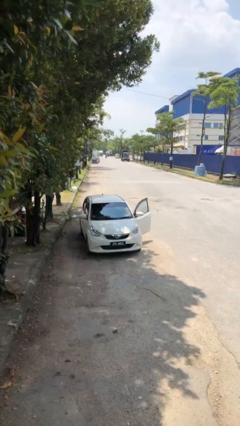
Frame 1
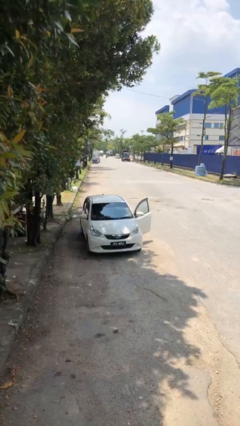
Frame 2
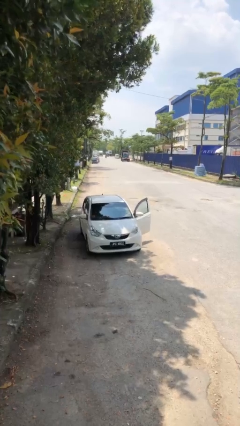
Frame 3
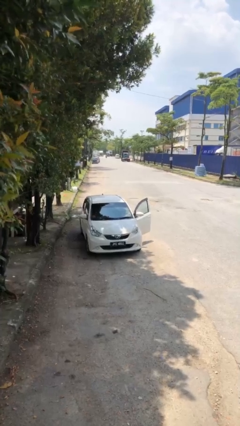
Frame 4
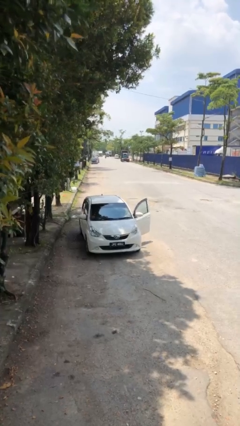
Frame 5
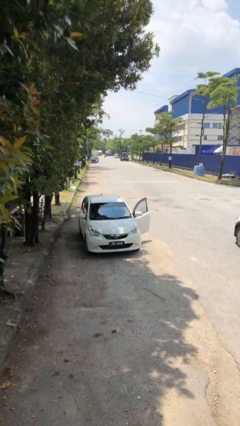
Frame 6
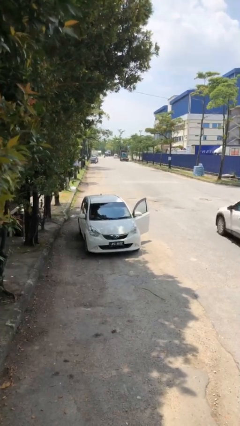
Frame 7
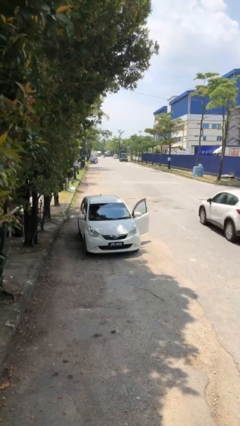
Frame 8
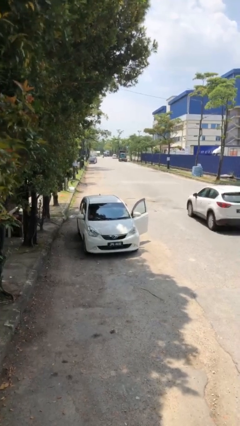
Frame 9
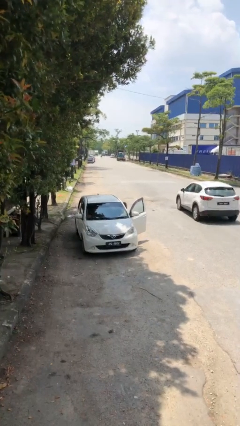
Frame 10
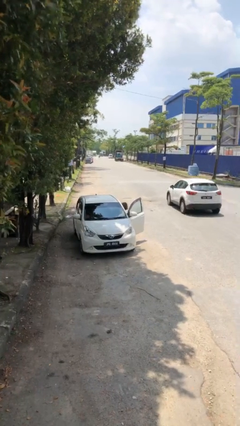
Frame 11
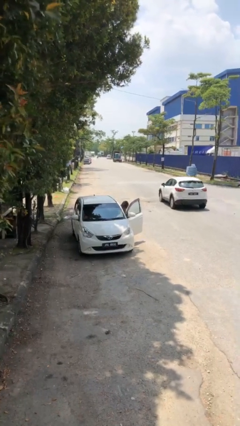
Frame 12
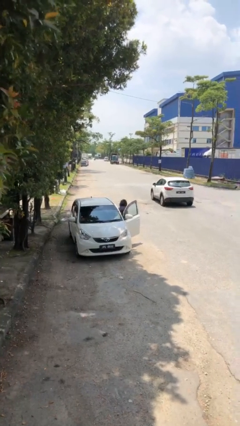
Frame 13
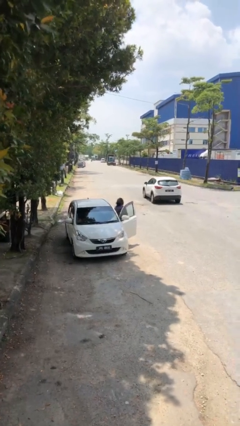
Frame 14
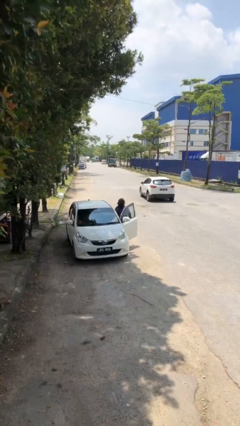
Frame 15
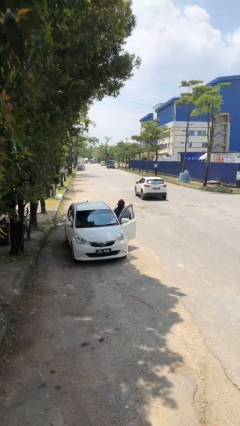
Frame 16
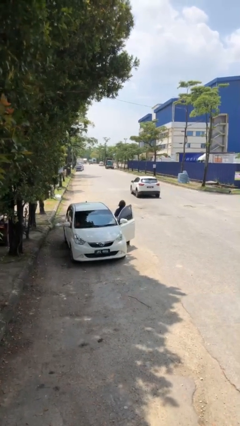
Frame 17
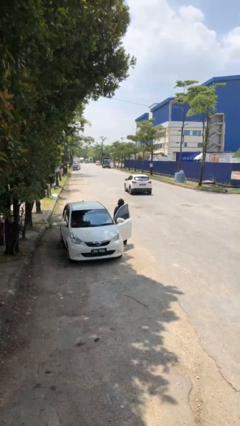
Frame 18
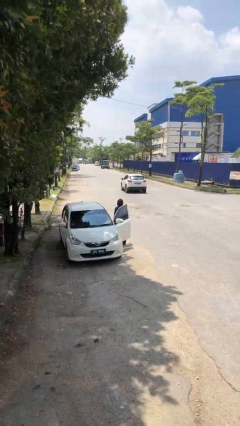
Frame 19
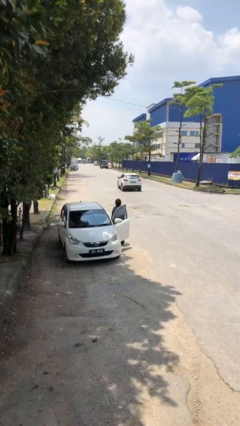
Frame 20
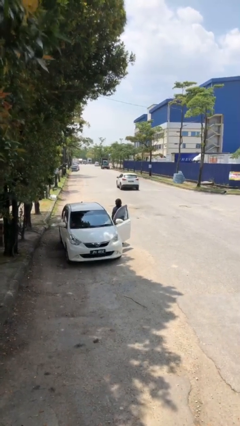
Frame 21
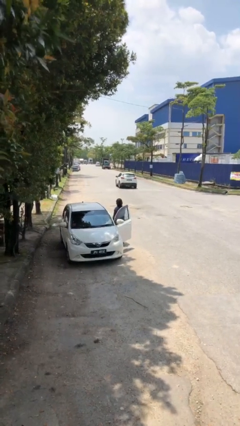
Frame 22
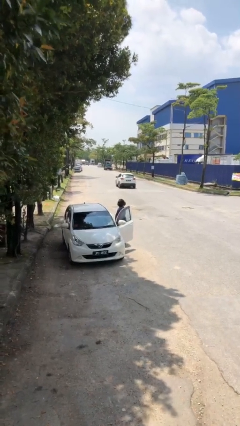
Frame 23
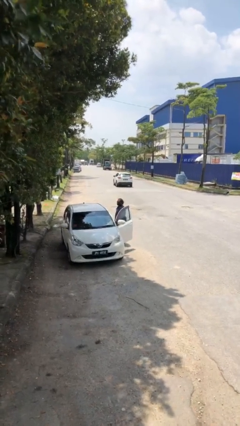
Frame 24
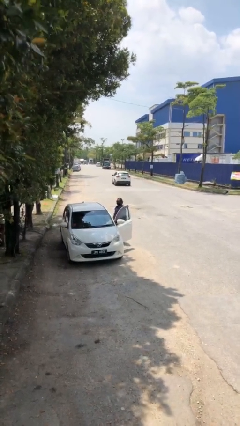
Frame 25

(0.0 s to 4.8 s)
person exits car

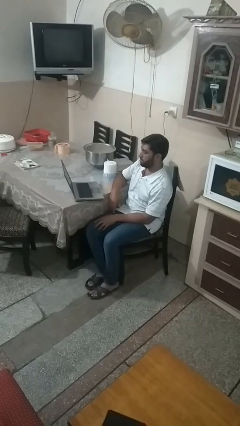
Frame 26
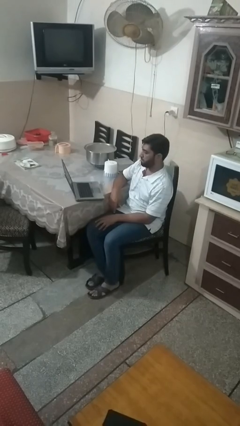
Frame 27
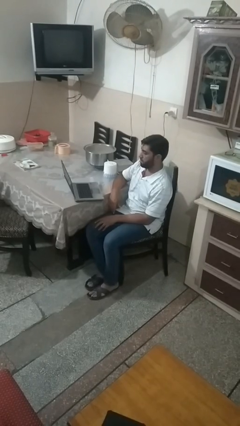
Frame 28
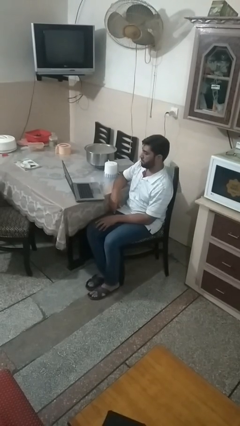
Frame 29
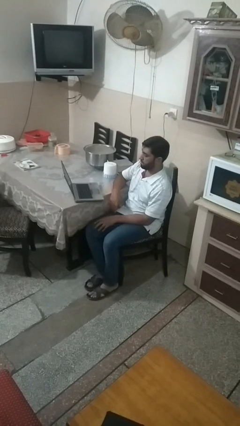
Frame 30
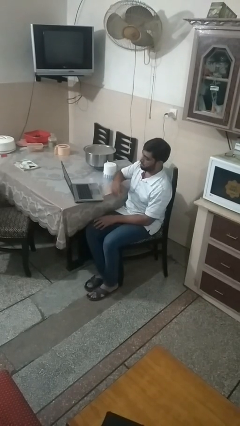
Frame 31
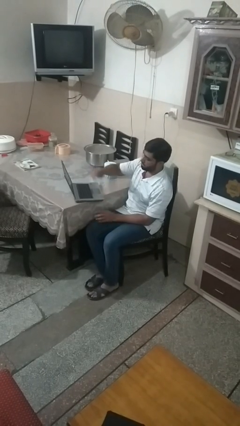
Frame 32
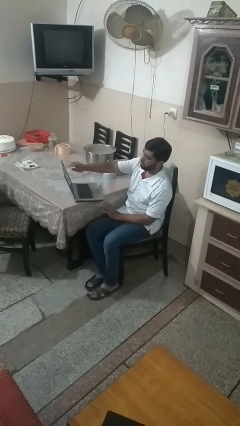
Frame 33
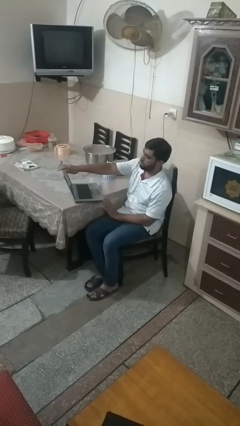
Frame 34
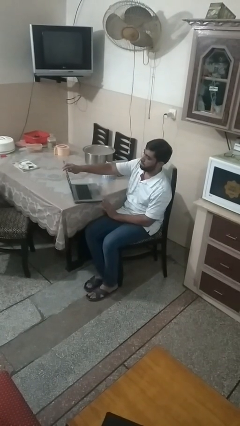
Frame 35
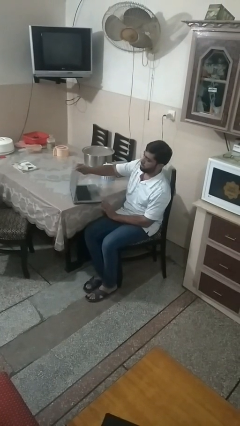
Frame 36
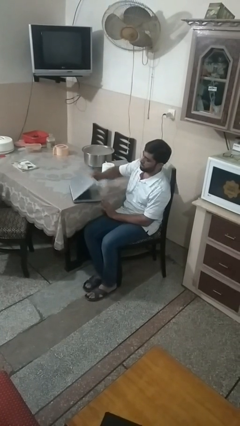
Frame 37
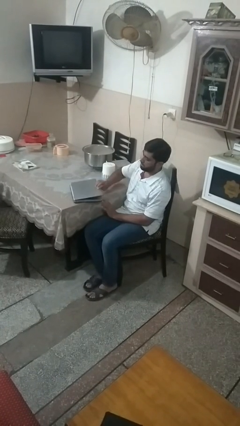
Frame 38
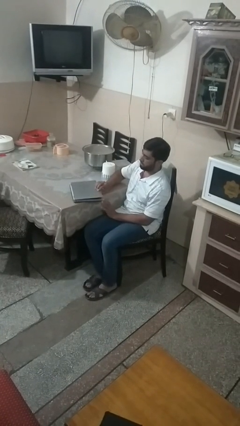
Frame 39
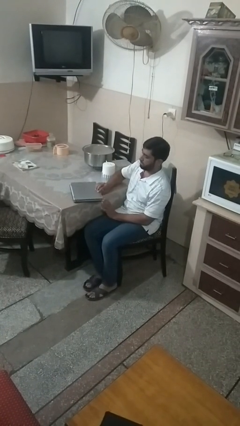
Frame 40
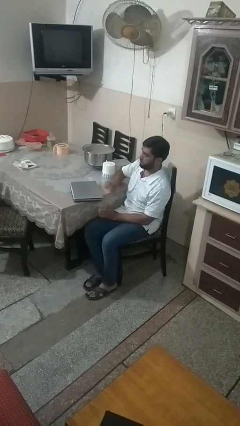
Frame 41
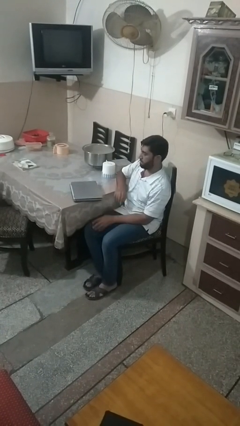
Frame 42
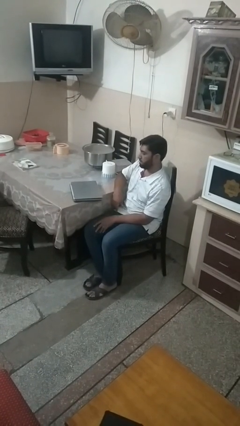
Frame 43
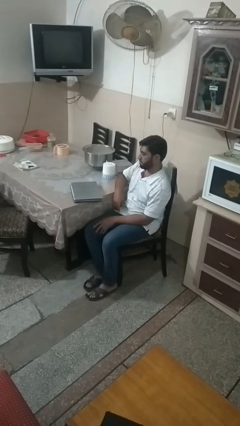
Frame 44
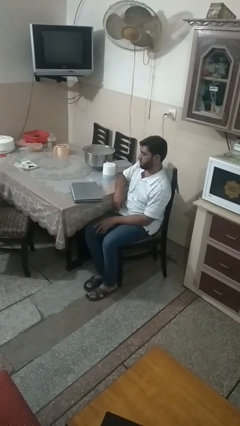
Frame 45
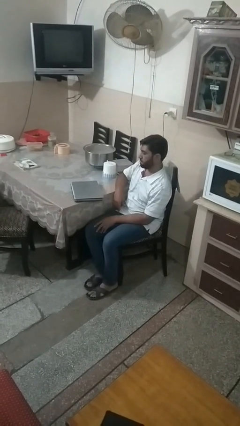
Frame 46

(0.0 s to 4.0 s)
person closes laptop

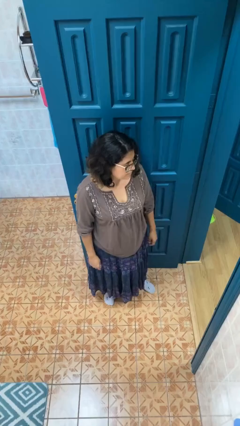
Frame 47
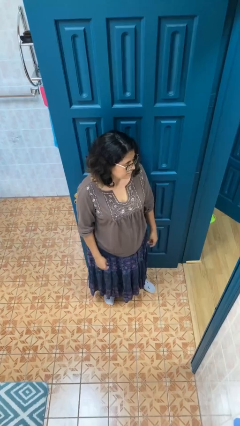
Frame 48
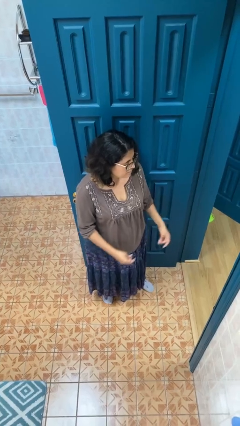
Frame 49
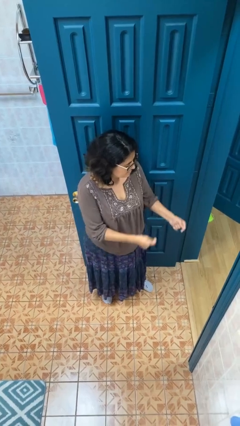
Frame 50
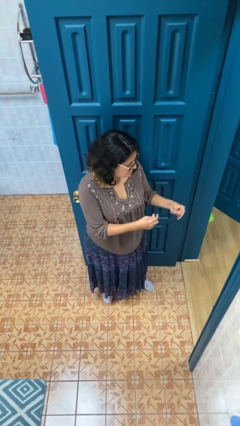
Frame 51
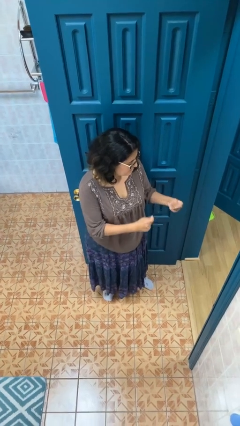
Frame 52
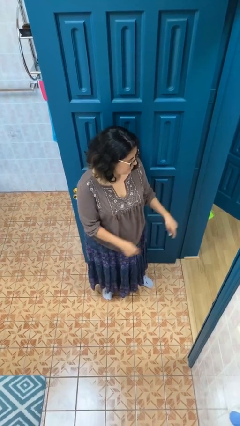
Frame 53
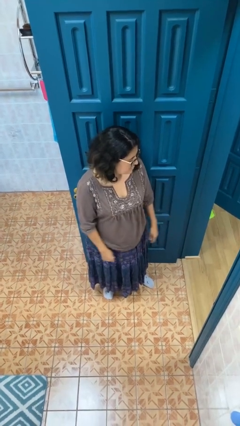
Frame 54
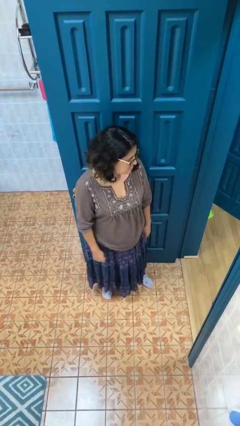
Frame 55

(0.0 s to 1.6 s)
person snaps fingers

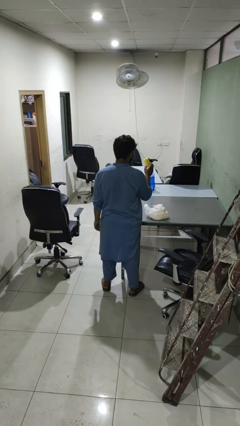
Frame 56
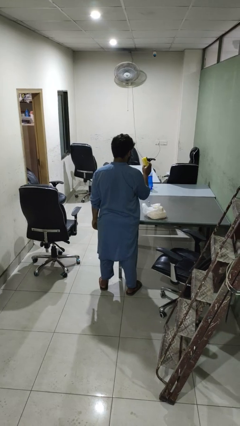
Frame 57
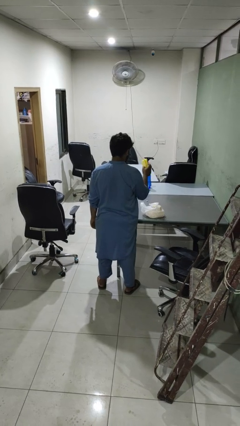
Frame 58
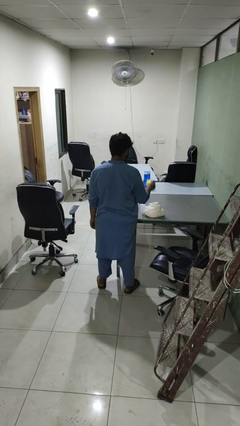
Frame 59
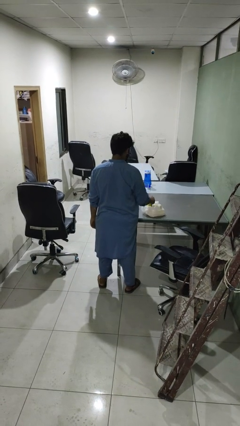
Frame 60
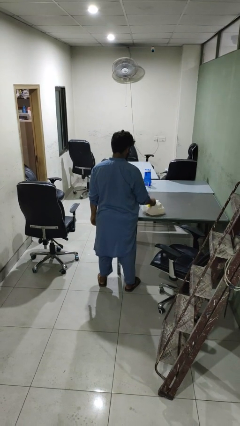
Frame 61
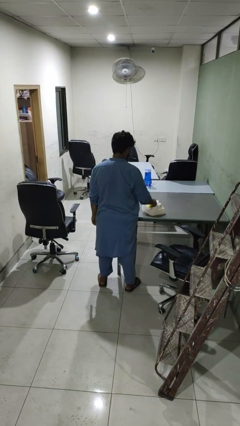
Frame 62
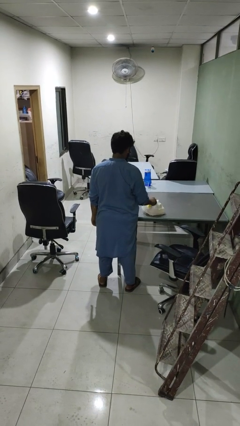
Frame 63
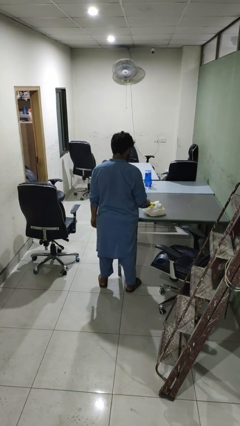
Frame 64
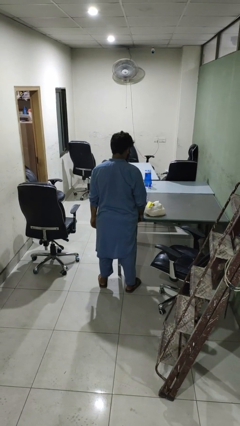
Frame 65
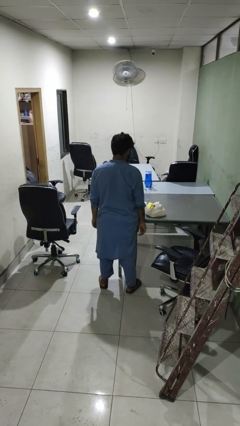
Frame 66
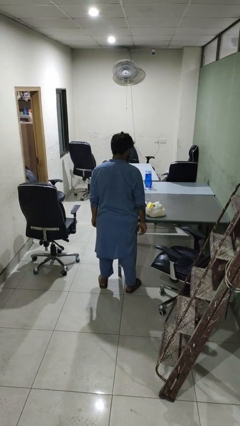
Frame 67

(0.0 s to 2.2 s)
person puts object into bag

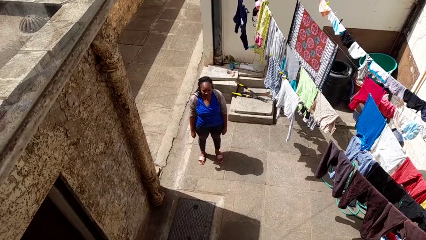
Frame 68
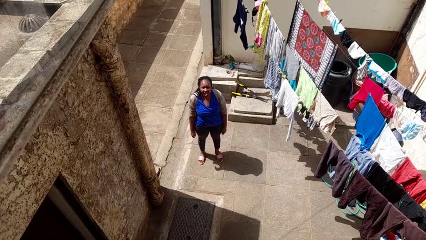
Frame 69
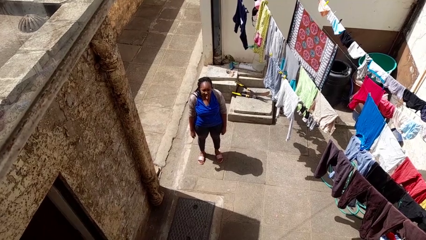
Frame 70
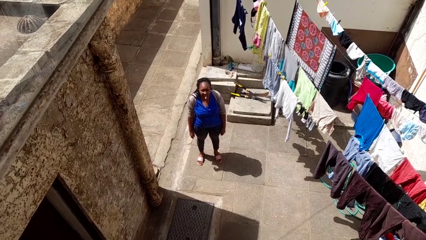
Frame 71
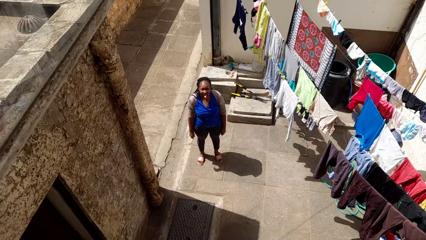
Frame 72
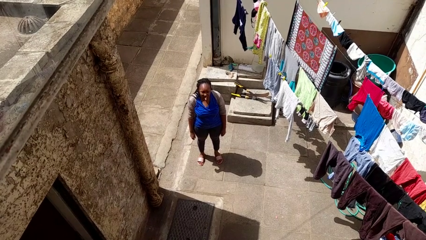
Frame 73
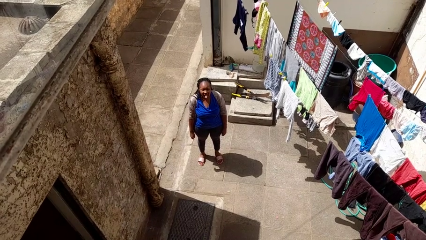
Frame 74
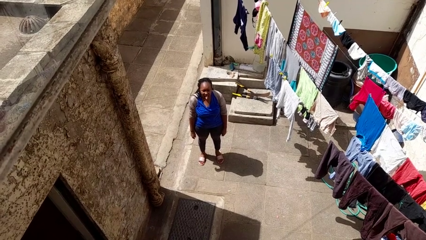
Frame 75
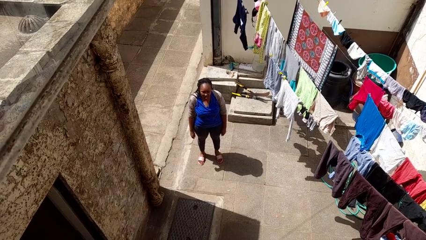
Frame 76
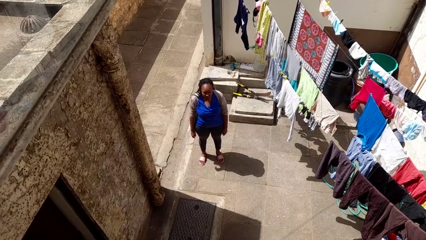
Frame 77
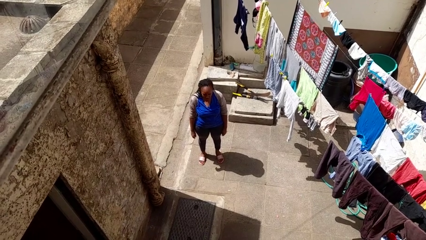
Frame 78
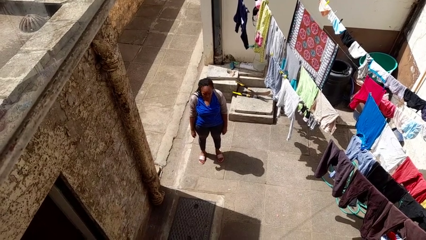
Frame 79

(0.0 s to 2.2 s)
person sticks out tongue

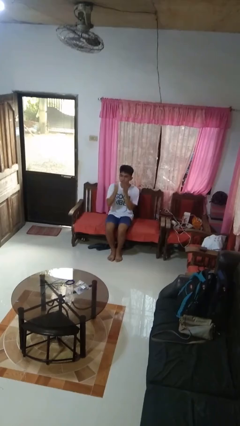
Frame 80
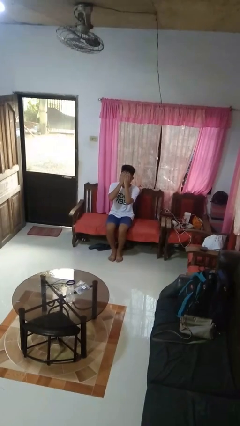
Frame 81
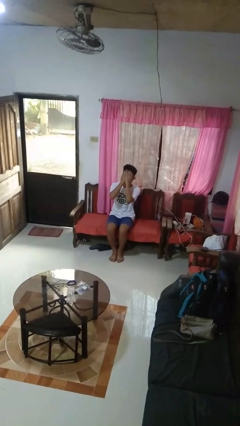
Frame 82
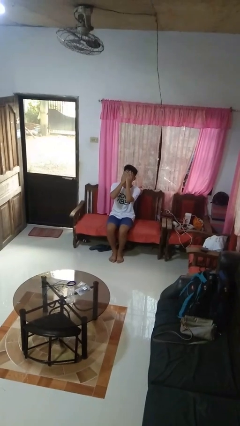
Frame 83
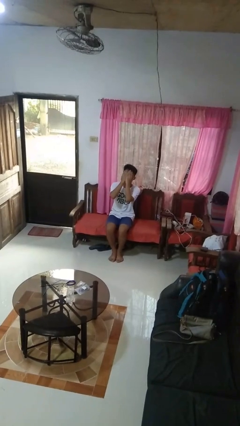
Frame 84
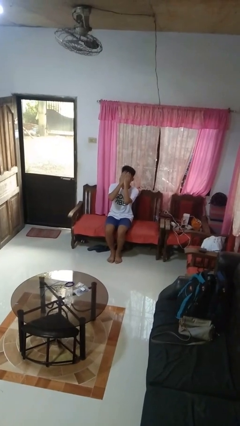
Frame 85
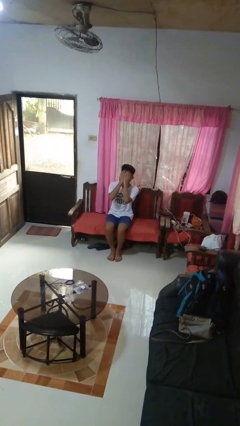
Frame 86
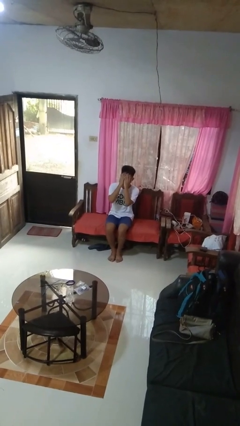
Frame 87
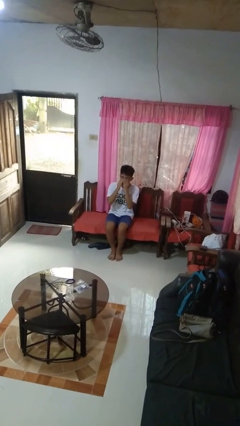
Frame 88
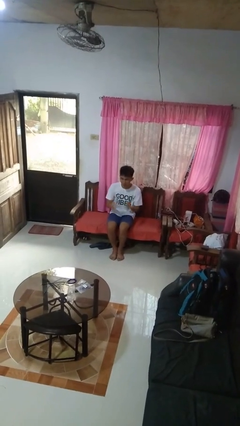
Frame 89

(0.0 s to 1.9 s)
person covers face with hands

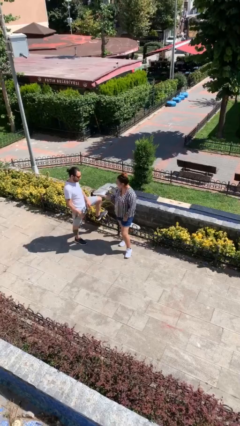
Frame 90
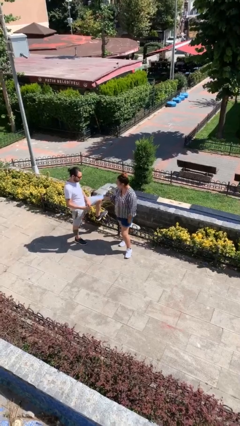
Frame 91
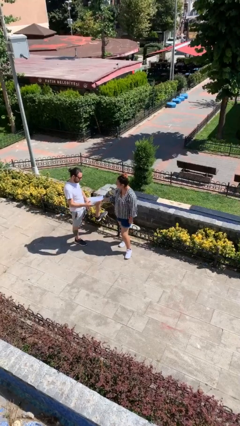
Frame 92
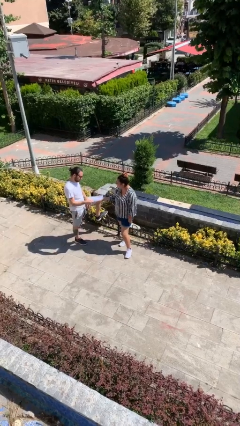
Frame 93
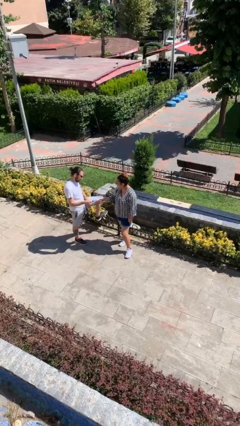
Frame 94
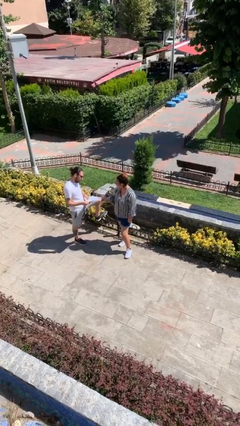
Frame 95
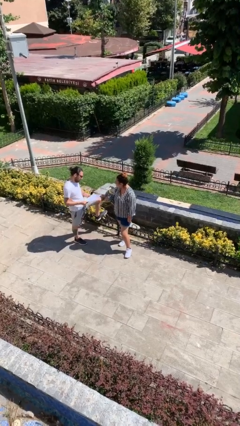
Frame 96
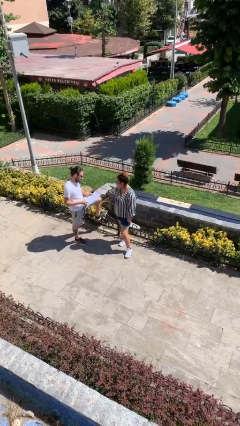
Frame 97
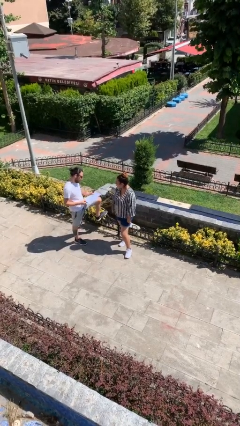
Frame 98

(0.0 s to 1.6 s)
person transfers object to person
